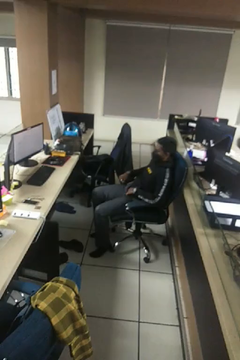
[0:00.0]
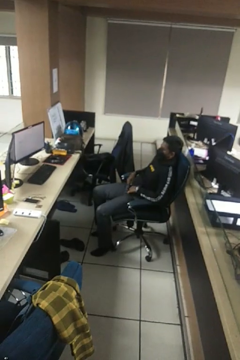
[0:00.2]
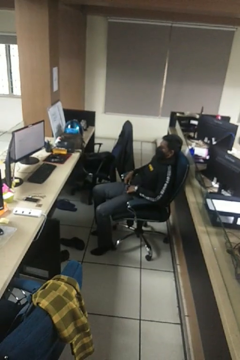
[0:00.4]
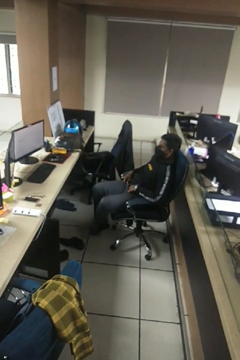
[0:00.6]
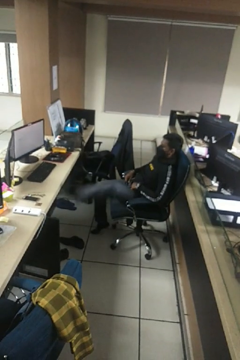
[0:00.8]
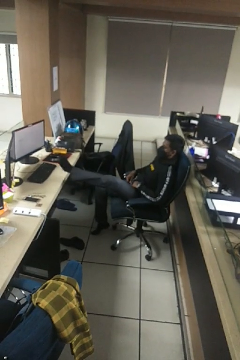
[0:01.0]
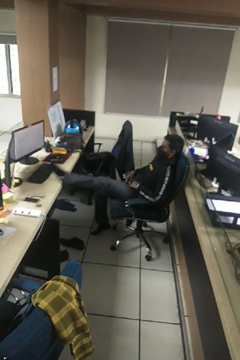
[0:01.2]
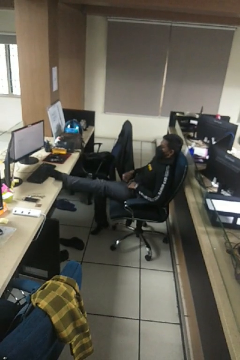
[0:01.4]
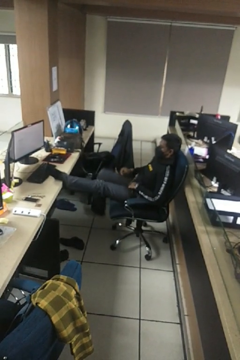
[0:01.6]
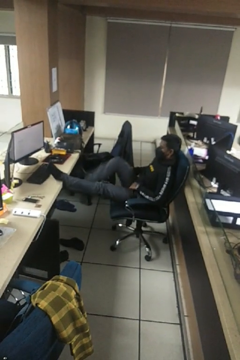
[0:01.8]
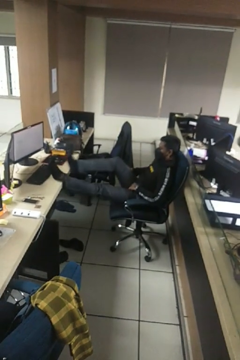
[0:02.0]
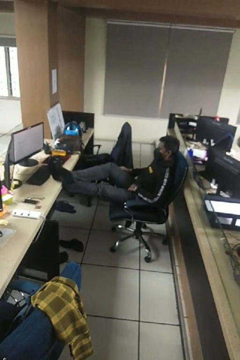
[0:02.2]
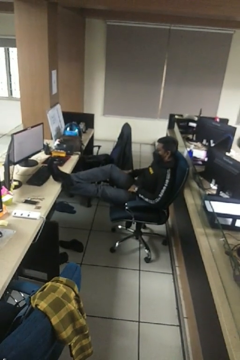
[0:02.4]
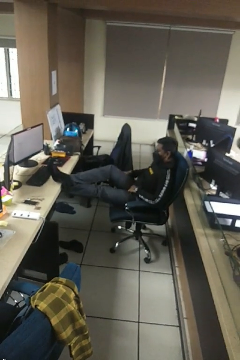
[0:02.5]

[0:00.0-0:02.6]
person puts feet up

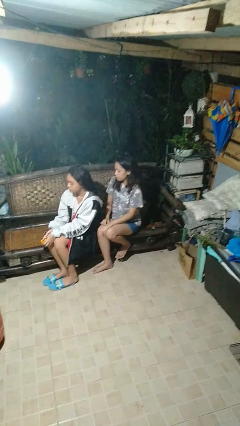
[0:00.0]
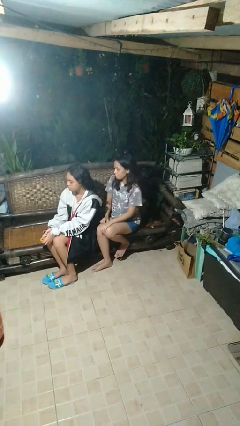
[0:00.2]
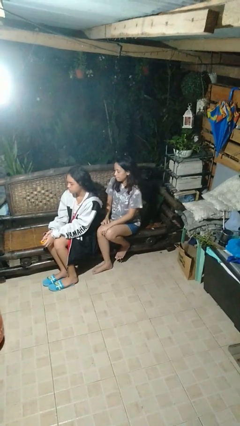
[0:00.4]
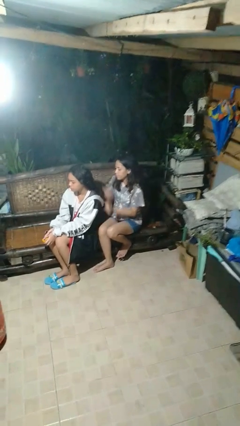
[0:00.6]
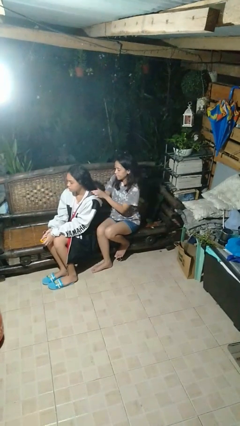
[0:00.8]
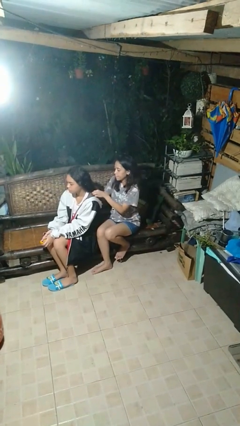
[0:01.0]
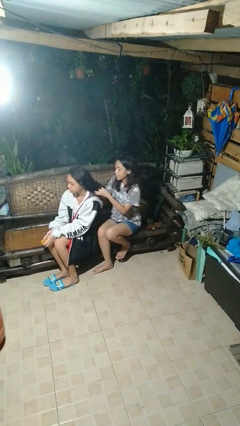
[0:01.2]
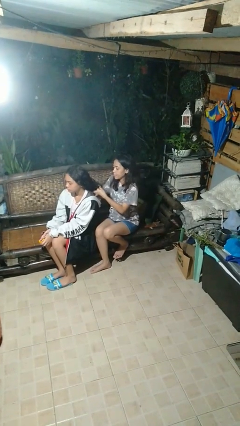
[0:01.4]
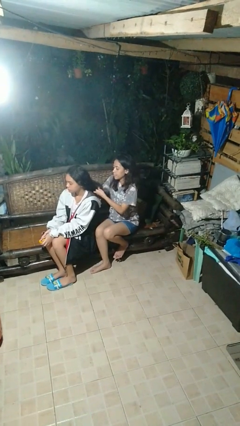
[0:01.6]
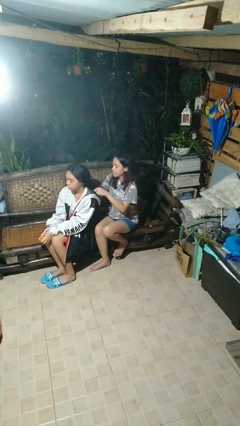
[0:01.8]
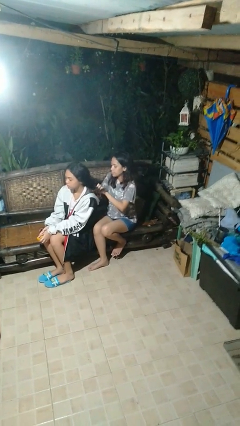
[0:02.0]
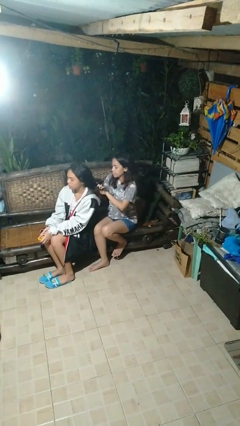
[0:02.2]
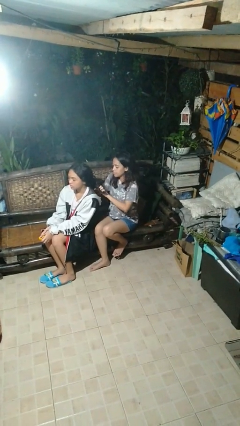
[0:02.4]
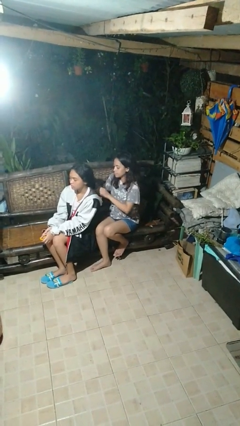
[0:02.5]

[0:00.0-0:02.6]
person braids hair of person

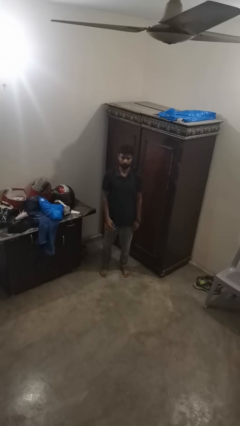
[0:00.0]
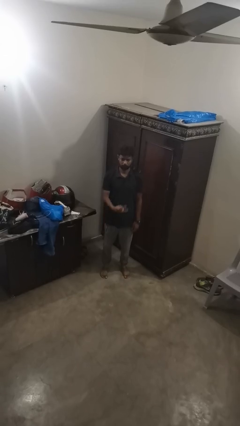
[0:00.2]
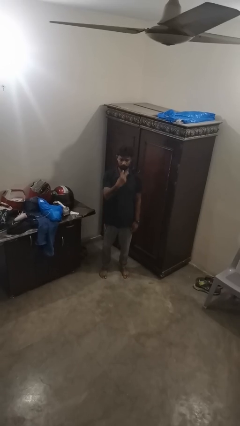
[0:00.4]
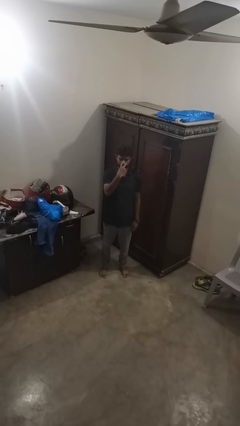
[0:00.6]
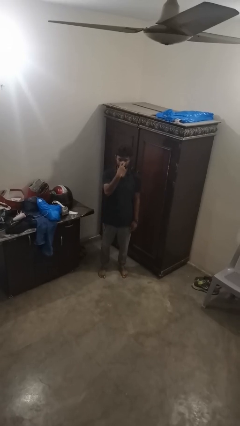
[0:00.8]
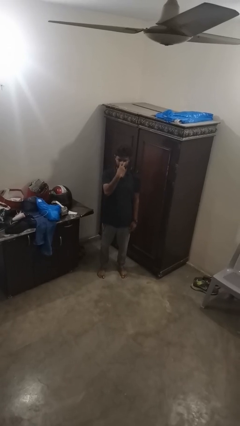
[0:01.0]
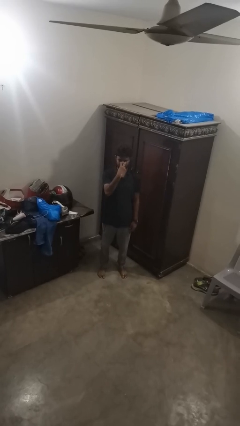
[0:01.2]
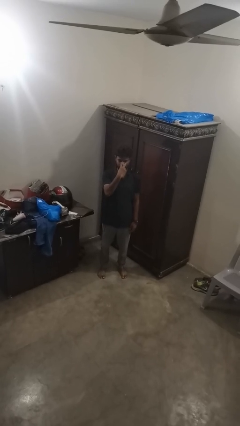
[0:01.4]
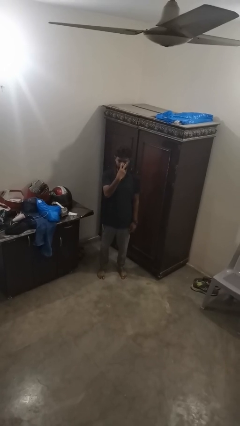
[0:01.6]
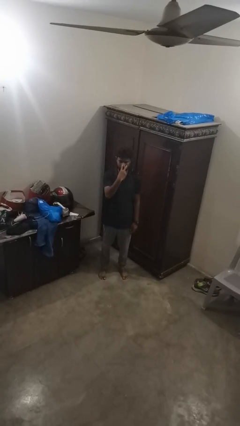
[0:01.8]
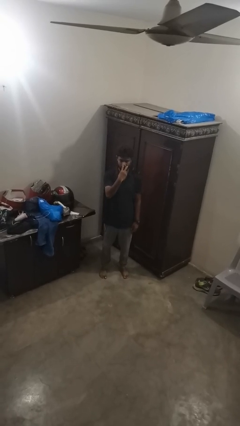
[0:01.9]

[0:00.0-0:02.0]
person gestures watch closely

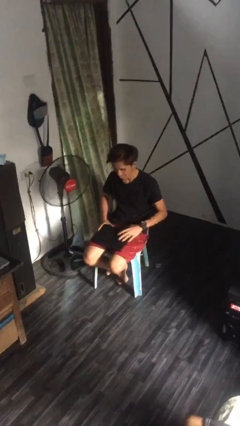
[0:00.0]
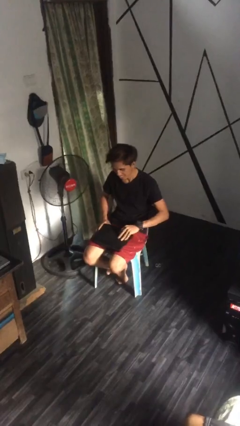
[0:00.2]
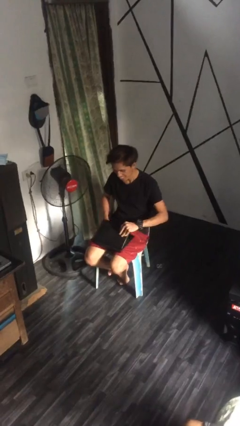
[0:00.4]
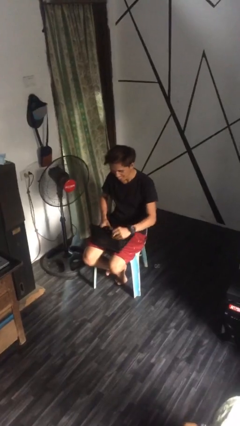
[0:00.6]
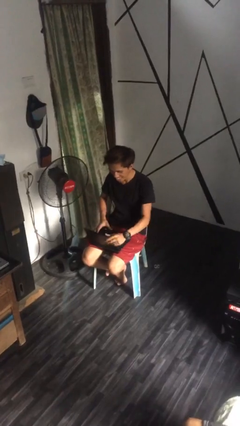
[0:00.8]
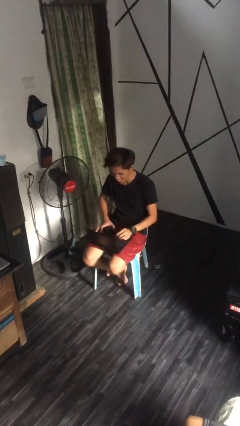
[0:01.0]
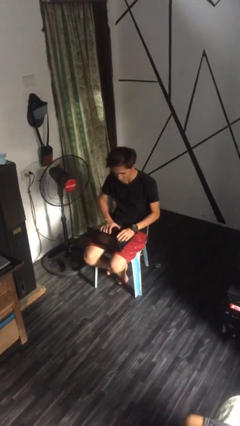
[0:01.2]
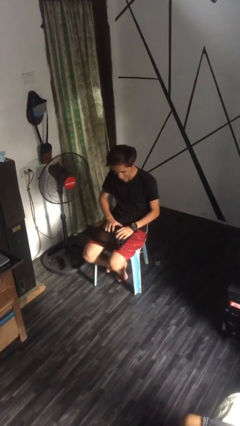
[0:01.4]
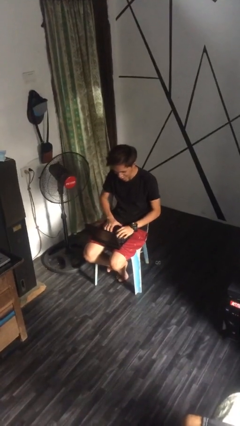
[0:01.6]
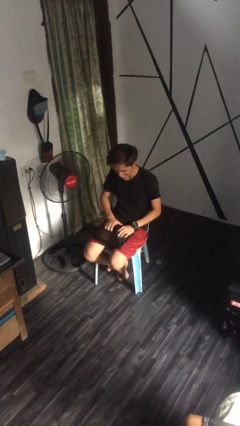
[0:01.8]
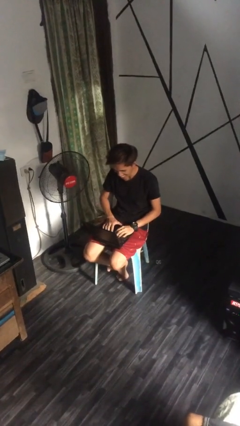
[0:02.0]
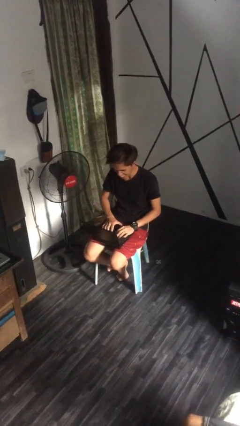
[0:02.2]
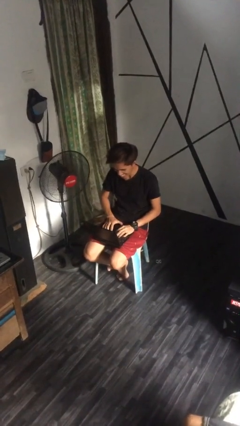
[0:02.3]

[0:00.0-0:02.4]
person interacts with laptop

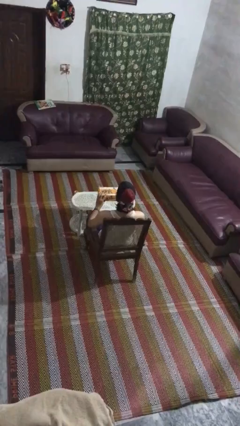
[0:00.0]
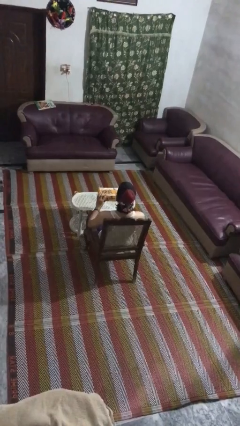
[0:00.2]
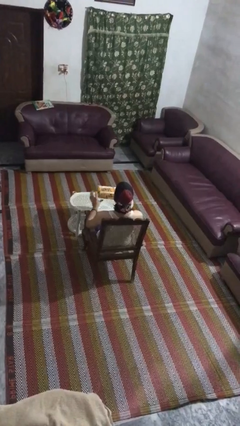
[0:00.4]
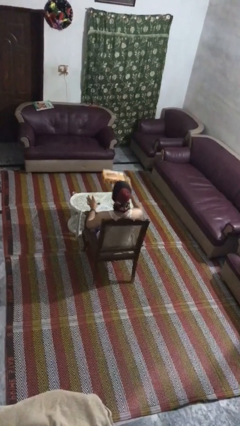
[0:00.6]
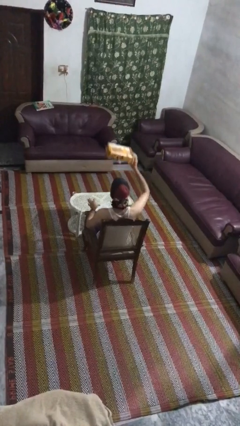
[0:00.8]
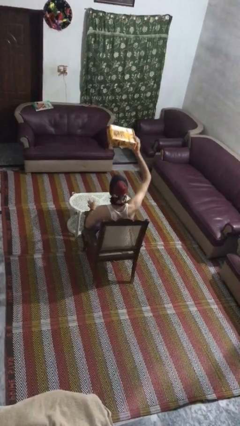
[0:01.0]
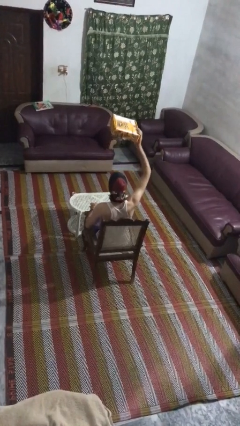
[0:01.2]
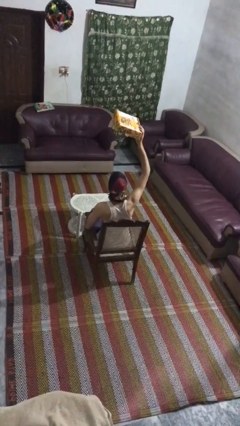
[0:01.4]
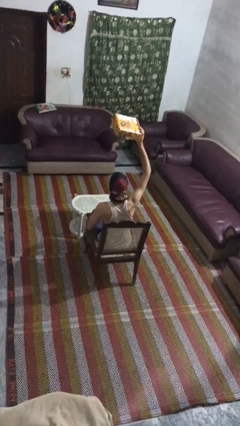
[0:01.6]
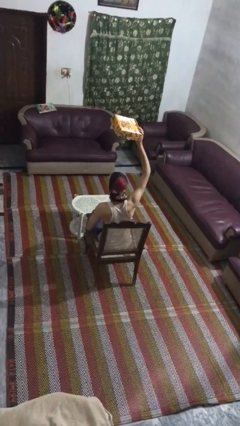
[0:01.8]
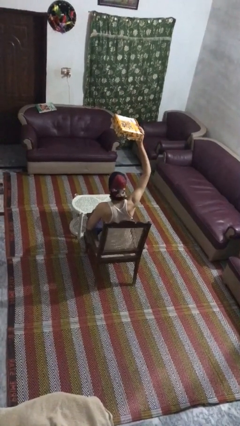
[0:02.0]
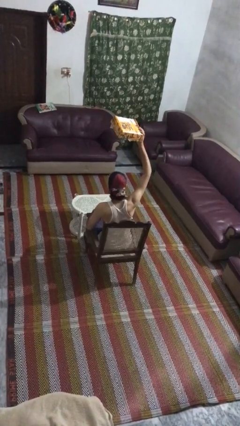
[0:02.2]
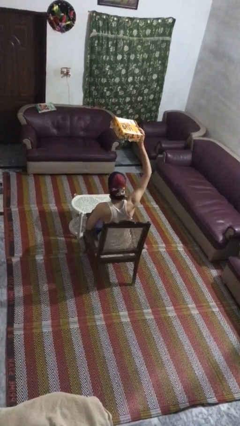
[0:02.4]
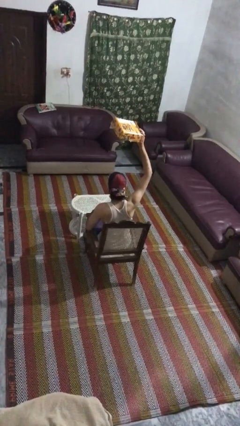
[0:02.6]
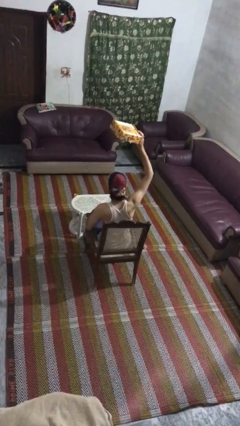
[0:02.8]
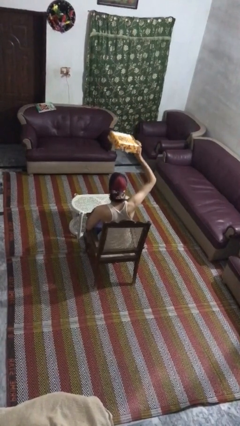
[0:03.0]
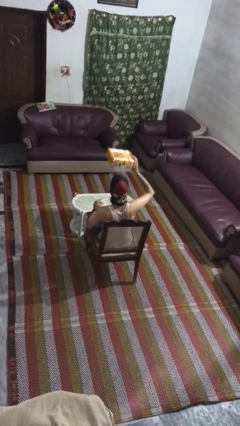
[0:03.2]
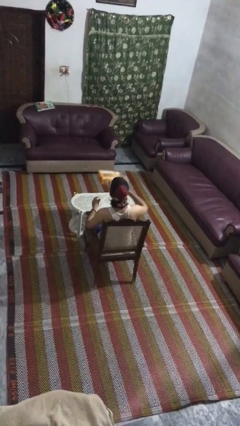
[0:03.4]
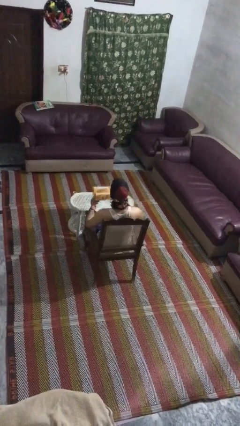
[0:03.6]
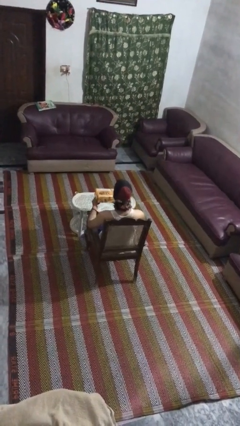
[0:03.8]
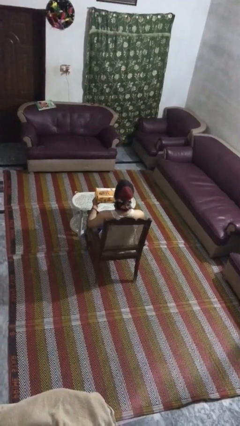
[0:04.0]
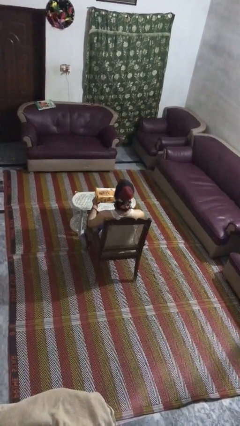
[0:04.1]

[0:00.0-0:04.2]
person holds object above head

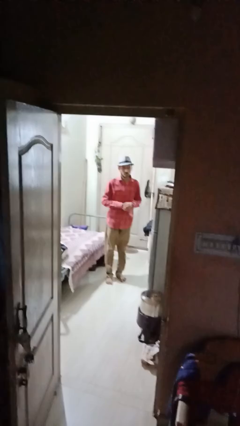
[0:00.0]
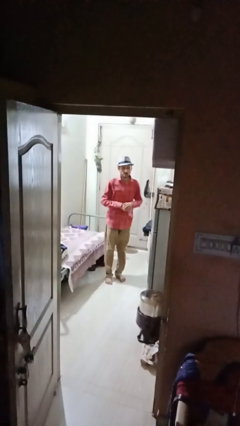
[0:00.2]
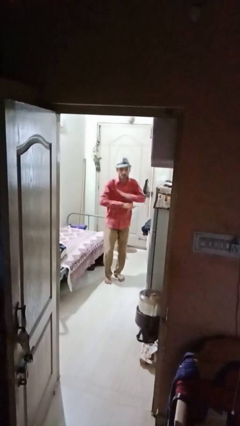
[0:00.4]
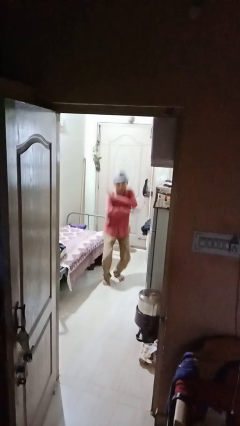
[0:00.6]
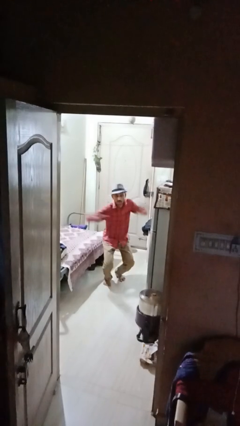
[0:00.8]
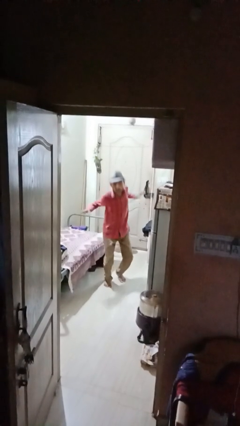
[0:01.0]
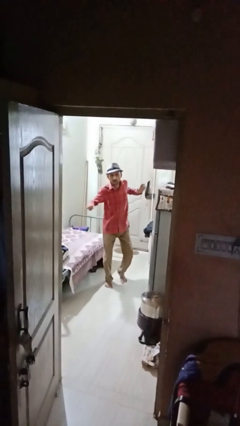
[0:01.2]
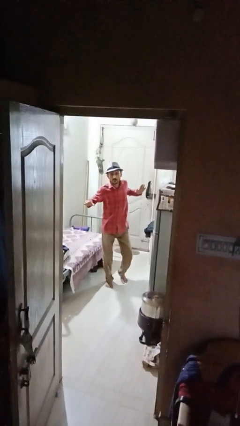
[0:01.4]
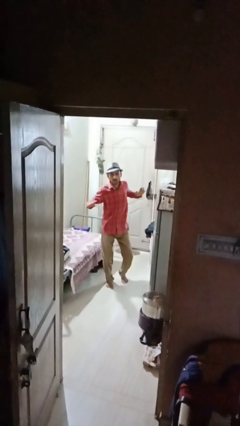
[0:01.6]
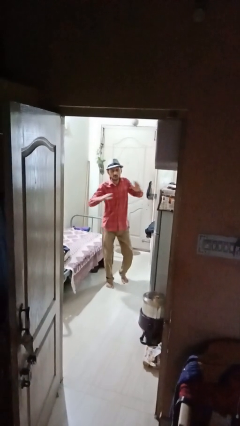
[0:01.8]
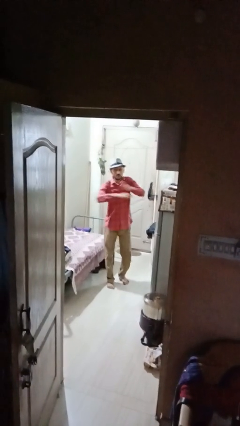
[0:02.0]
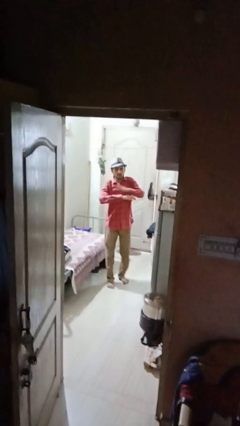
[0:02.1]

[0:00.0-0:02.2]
person karate chop

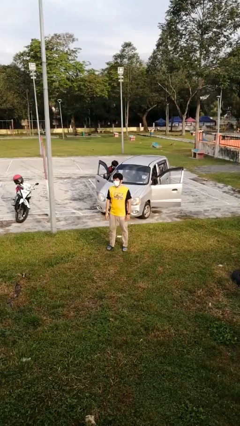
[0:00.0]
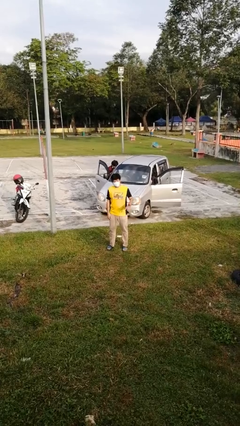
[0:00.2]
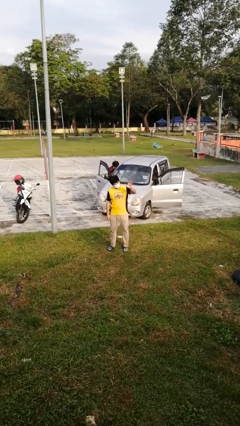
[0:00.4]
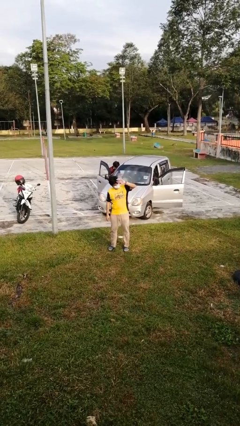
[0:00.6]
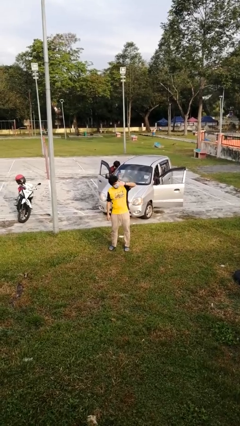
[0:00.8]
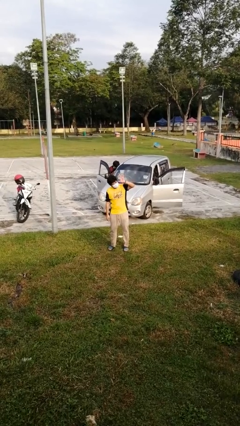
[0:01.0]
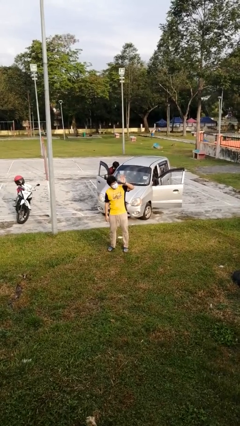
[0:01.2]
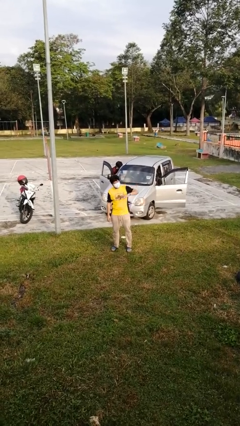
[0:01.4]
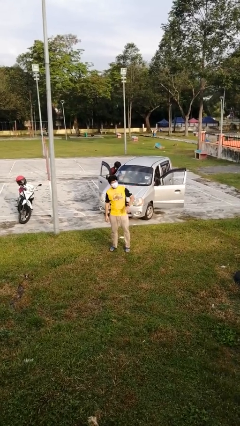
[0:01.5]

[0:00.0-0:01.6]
person waves at person

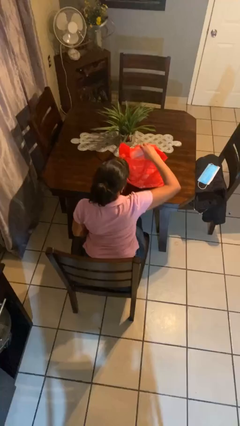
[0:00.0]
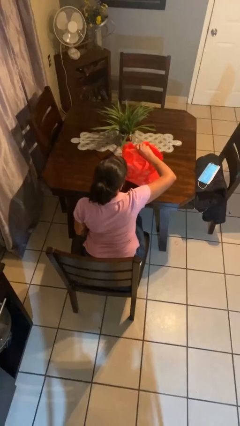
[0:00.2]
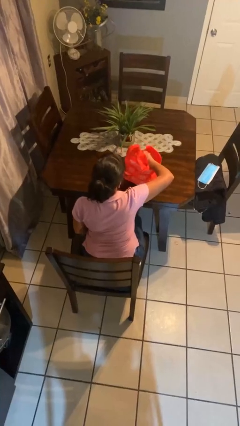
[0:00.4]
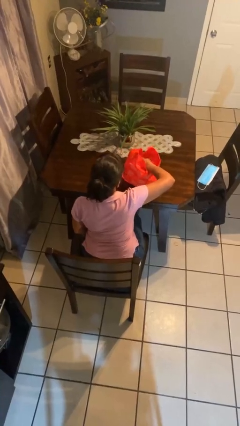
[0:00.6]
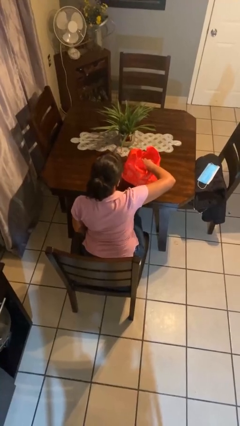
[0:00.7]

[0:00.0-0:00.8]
person puts object into bag
